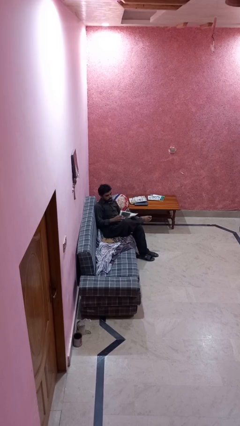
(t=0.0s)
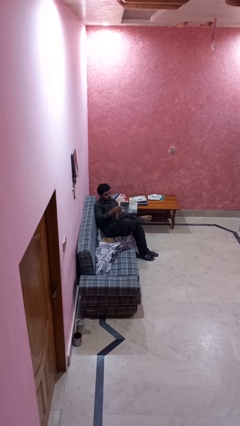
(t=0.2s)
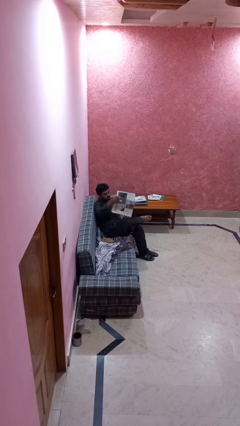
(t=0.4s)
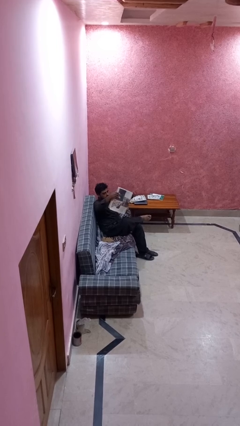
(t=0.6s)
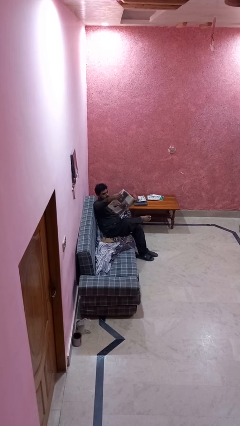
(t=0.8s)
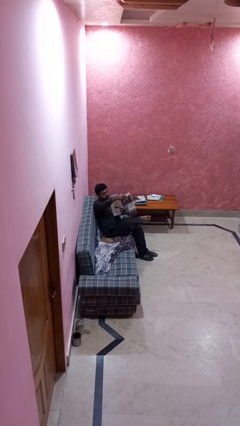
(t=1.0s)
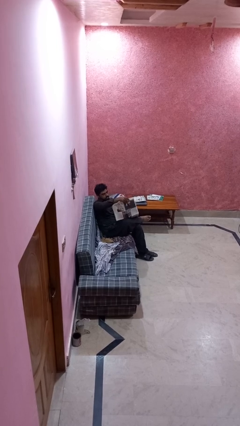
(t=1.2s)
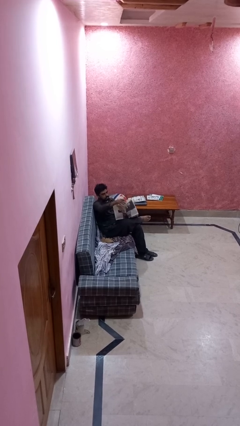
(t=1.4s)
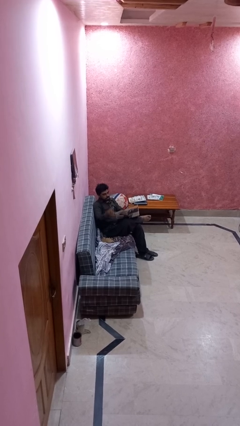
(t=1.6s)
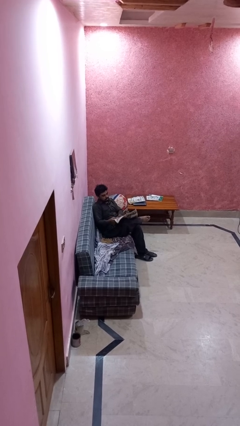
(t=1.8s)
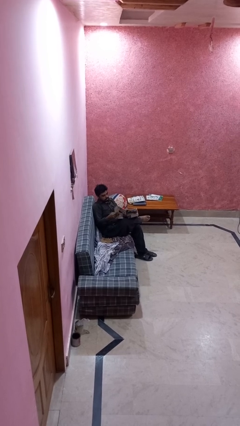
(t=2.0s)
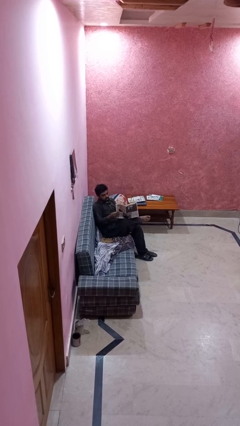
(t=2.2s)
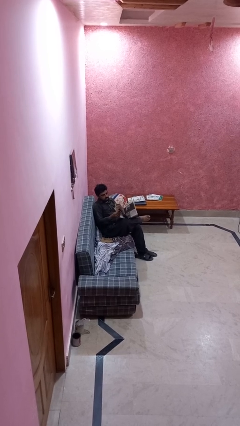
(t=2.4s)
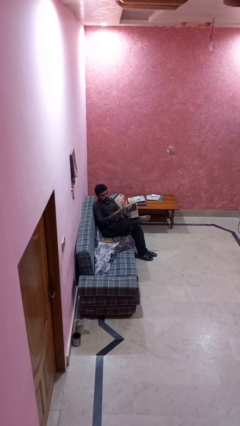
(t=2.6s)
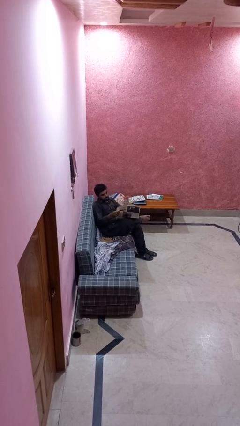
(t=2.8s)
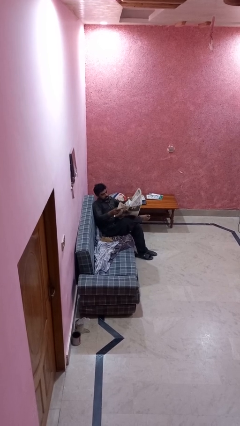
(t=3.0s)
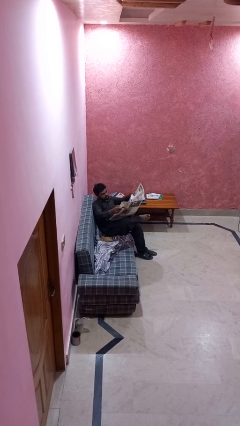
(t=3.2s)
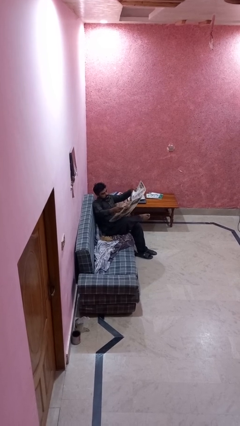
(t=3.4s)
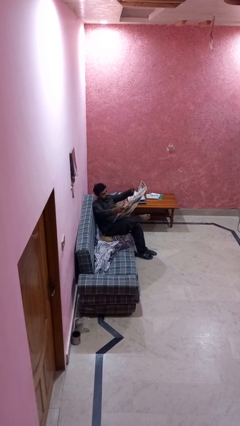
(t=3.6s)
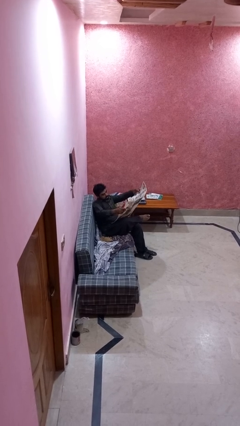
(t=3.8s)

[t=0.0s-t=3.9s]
person reads newspaper

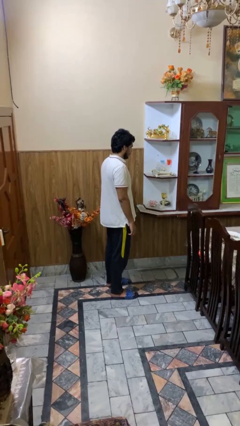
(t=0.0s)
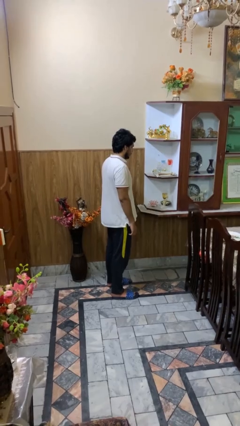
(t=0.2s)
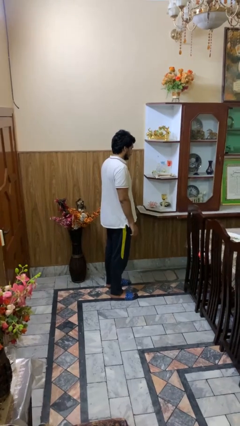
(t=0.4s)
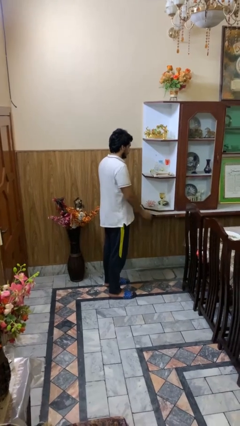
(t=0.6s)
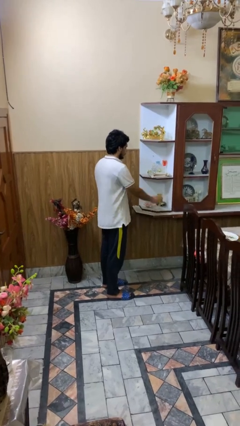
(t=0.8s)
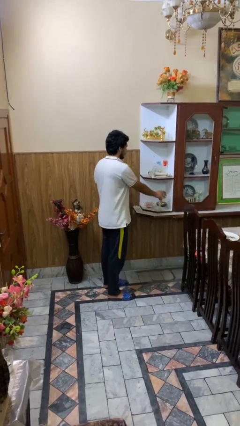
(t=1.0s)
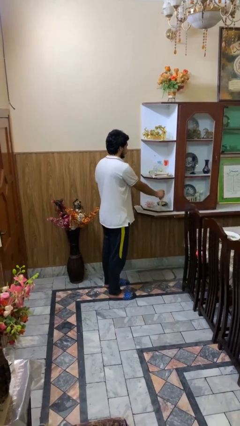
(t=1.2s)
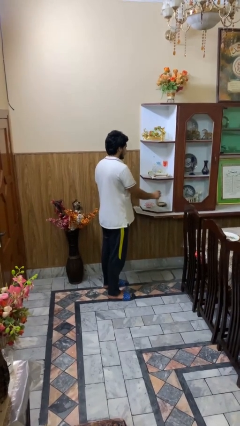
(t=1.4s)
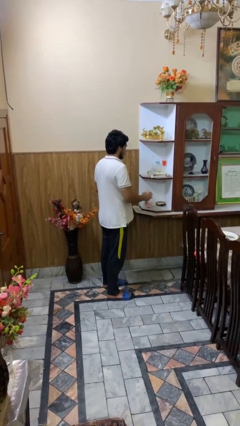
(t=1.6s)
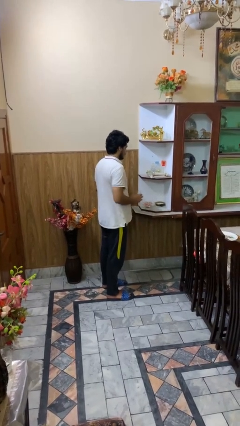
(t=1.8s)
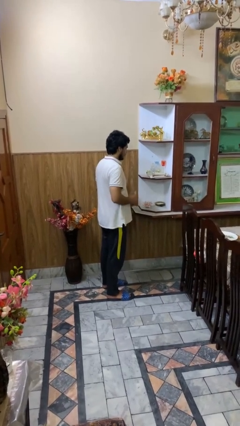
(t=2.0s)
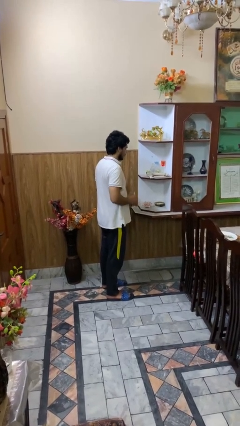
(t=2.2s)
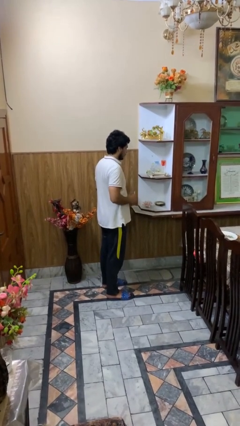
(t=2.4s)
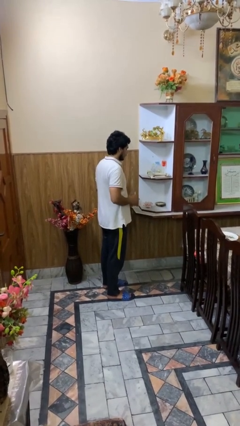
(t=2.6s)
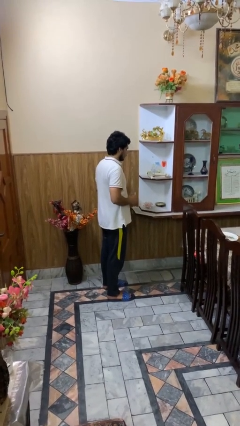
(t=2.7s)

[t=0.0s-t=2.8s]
person picks up object from cabinet

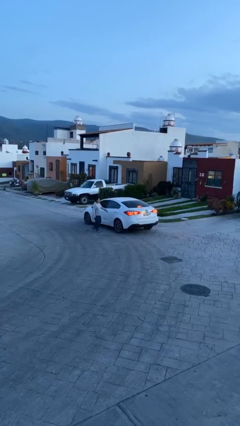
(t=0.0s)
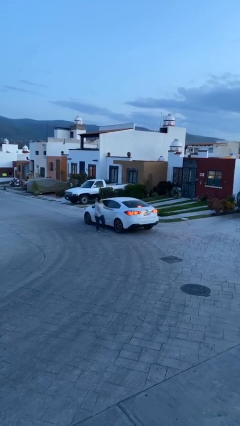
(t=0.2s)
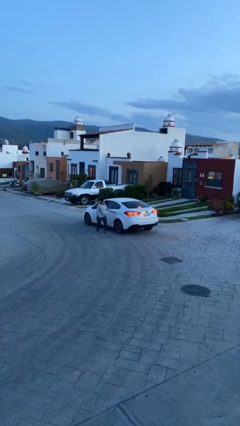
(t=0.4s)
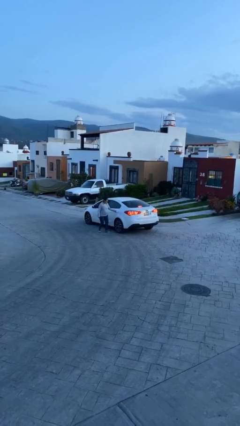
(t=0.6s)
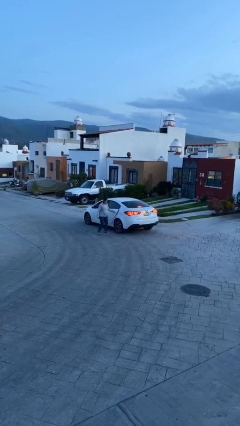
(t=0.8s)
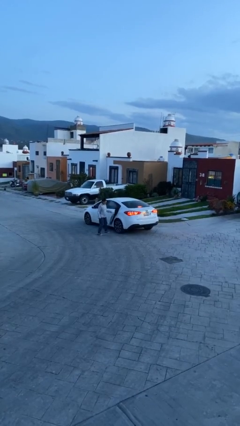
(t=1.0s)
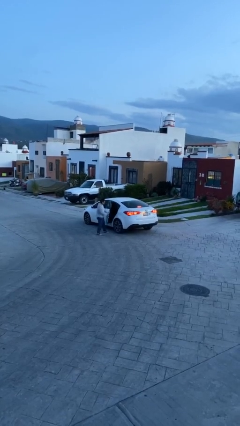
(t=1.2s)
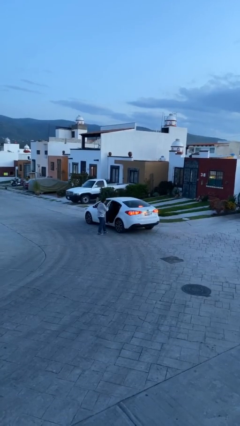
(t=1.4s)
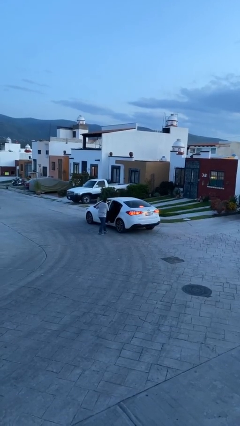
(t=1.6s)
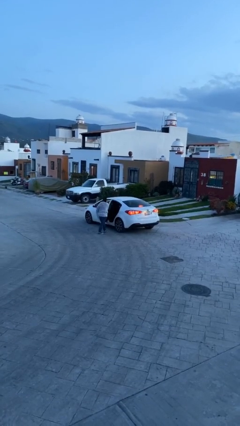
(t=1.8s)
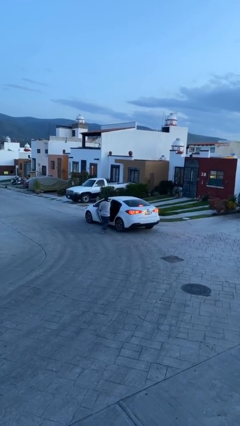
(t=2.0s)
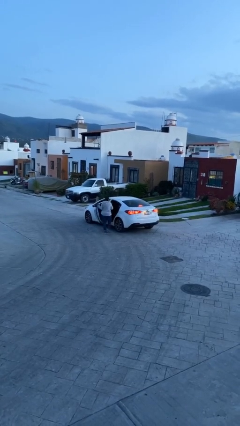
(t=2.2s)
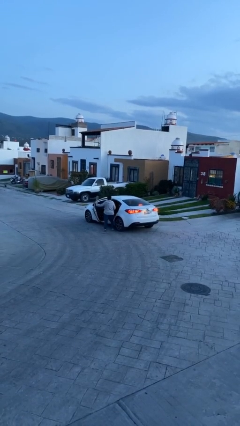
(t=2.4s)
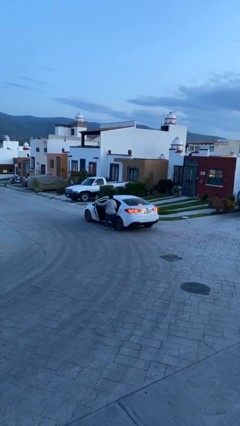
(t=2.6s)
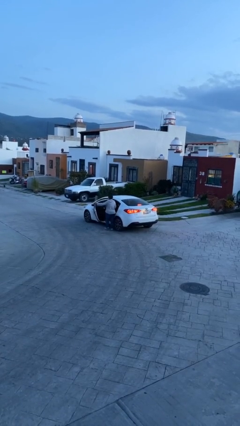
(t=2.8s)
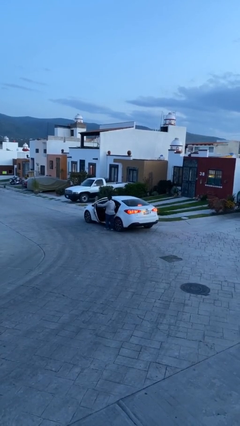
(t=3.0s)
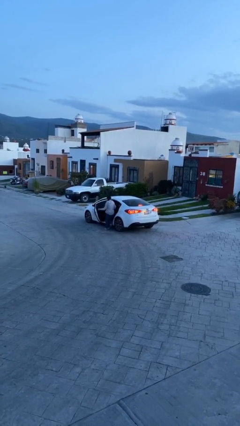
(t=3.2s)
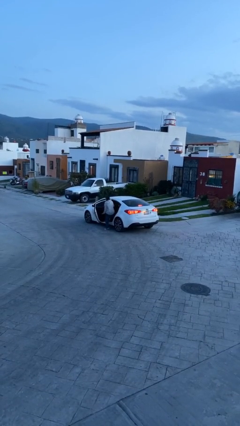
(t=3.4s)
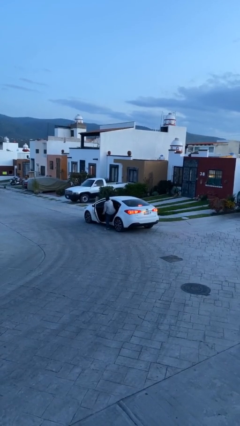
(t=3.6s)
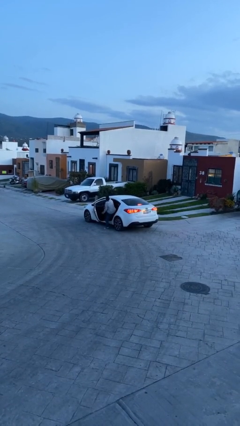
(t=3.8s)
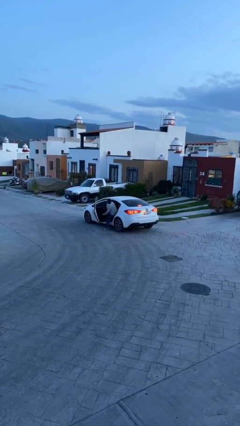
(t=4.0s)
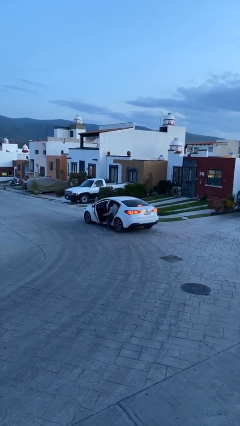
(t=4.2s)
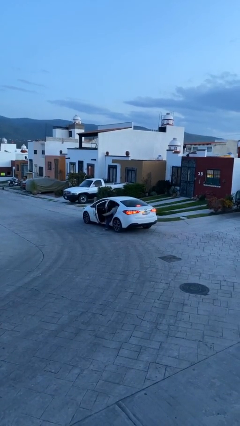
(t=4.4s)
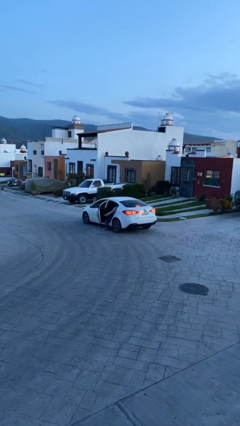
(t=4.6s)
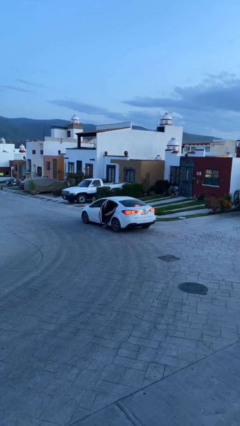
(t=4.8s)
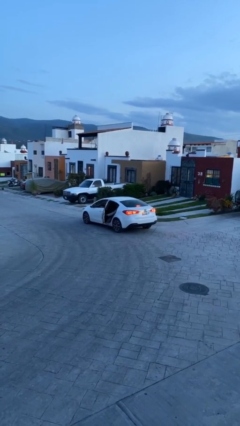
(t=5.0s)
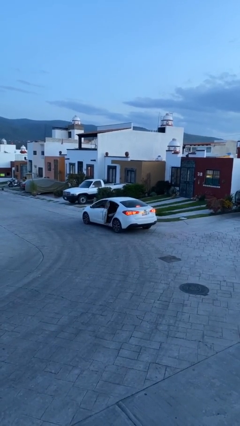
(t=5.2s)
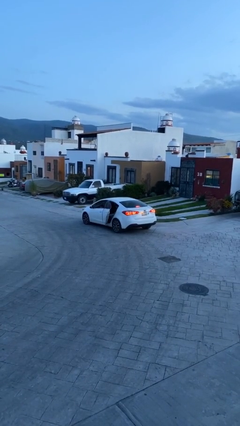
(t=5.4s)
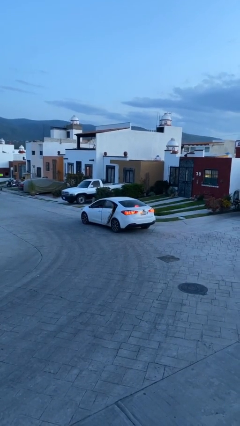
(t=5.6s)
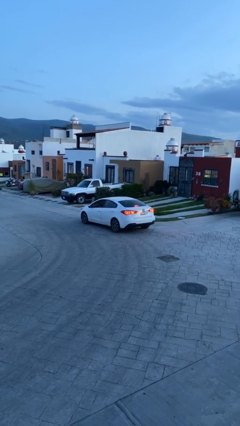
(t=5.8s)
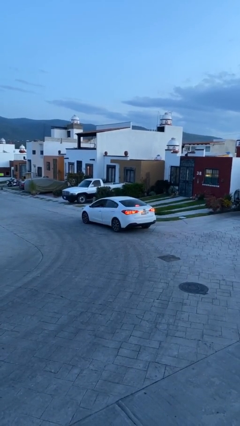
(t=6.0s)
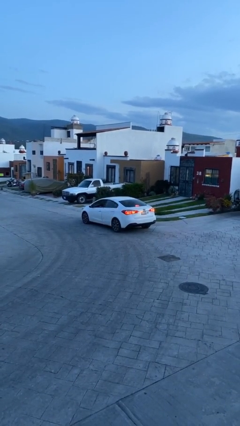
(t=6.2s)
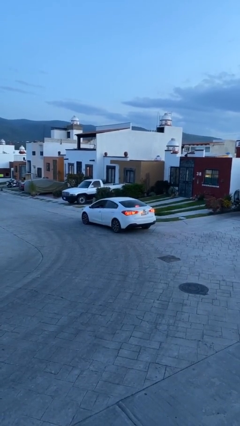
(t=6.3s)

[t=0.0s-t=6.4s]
car picks up person

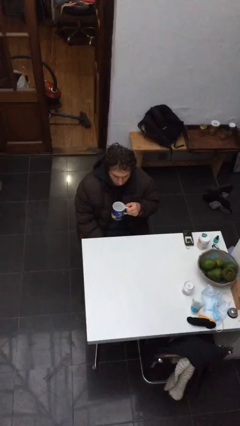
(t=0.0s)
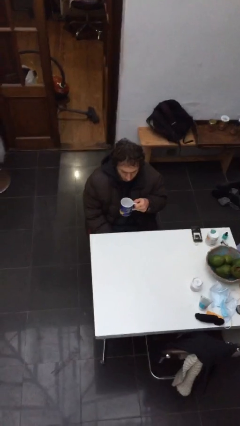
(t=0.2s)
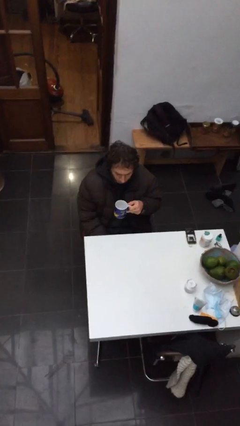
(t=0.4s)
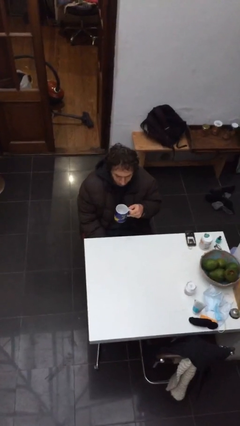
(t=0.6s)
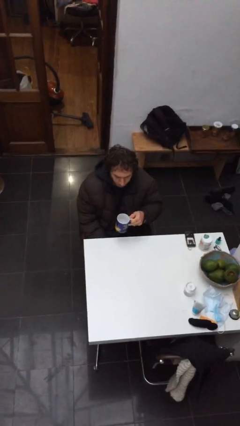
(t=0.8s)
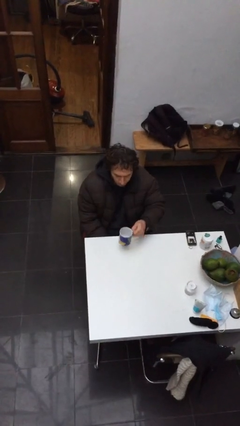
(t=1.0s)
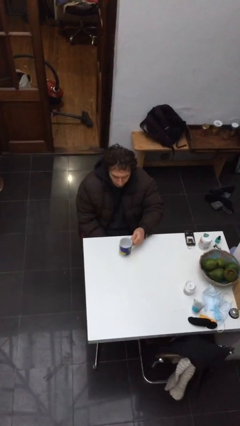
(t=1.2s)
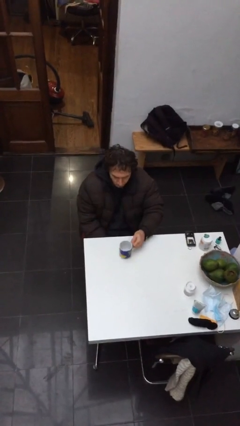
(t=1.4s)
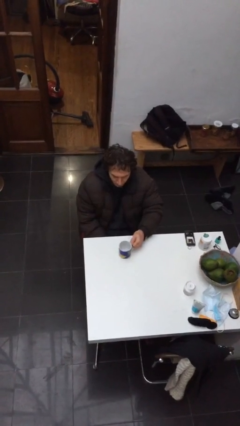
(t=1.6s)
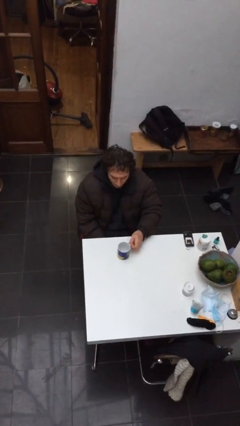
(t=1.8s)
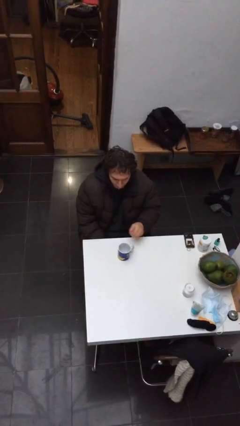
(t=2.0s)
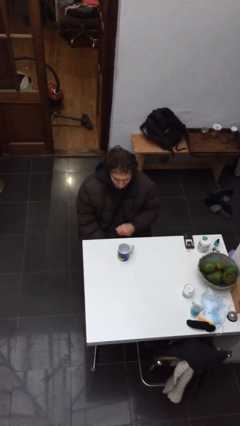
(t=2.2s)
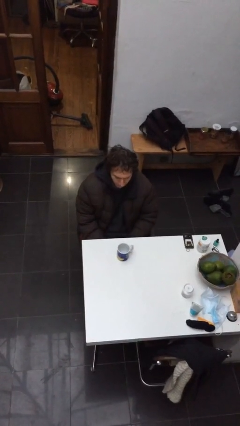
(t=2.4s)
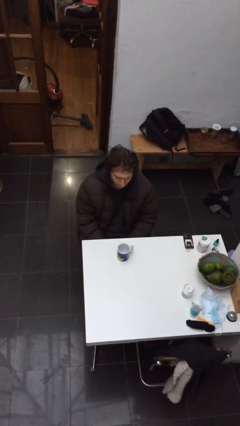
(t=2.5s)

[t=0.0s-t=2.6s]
person puts down object on table

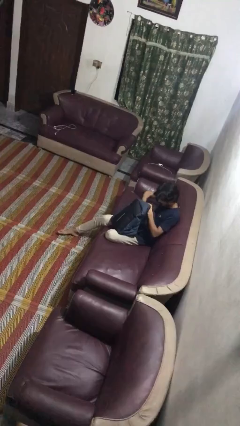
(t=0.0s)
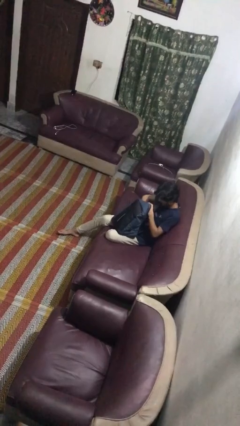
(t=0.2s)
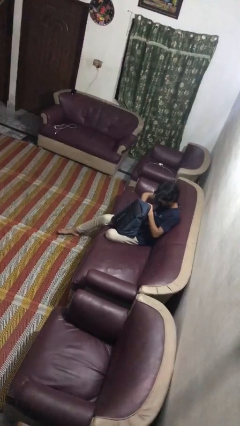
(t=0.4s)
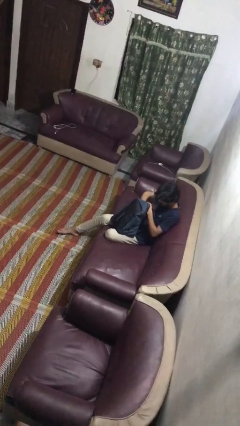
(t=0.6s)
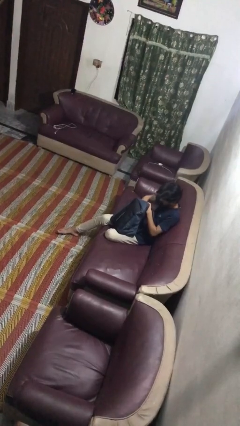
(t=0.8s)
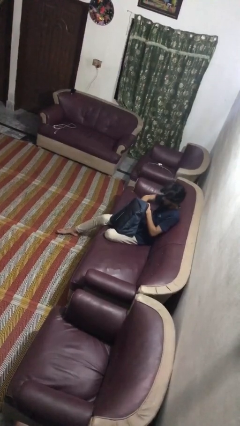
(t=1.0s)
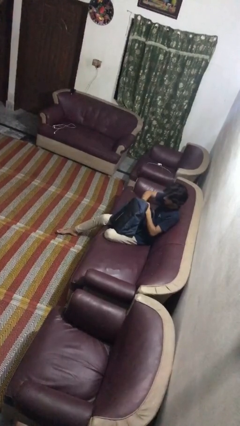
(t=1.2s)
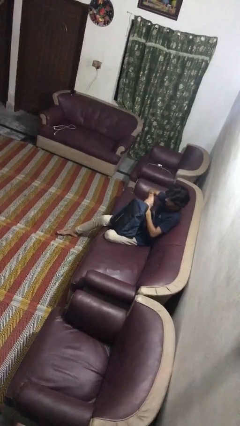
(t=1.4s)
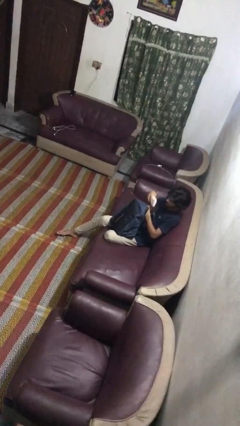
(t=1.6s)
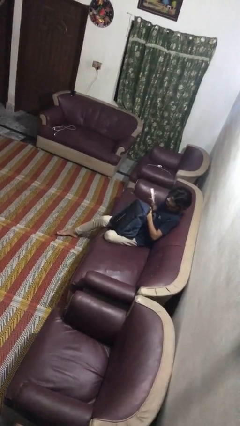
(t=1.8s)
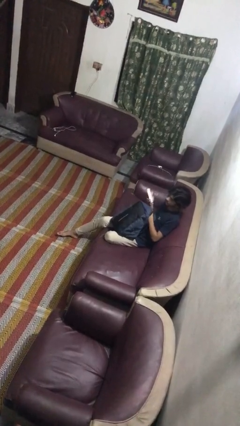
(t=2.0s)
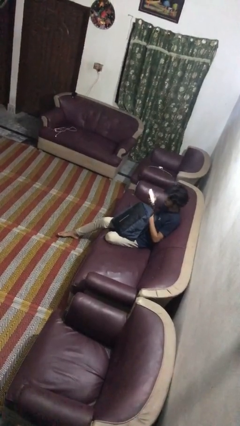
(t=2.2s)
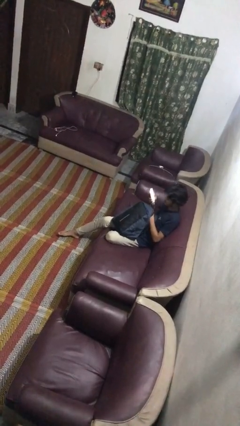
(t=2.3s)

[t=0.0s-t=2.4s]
person takes object from backpack
